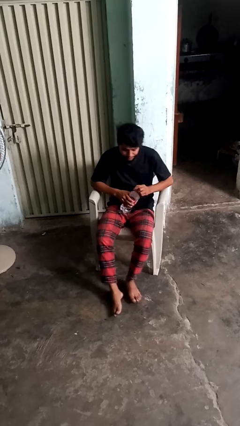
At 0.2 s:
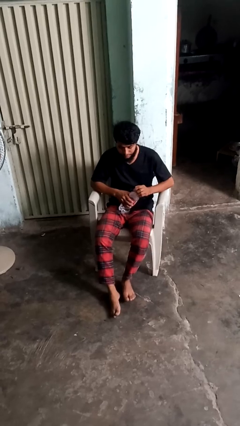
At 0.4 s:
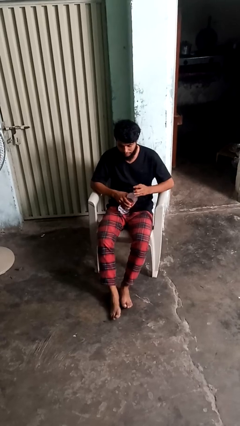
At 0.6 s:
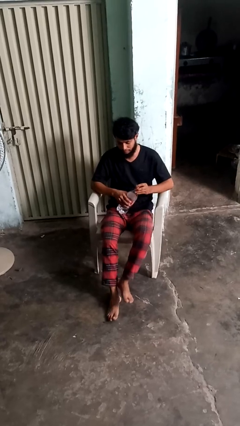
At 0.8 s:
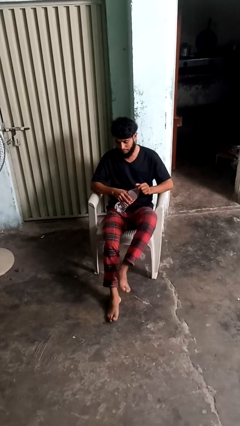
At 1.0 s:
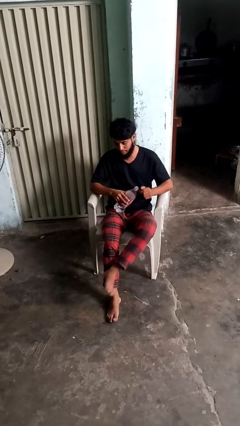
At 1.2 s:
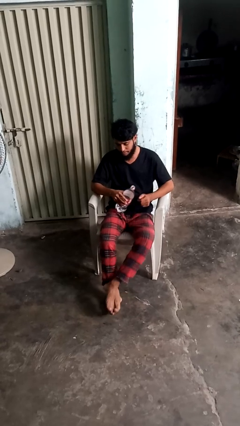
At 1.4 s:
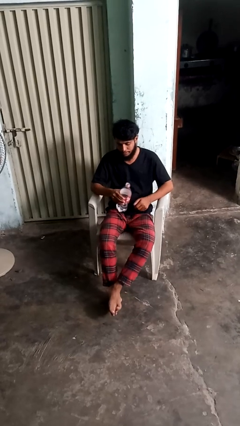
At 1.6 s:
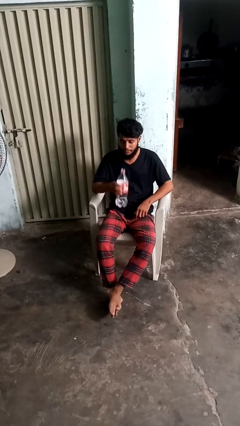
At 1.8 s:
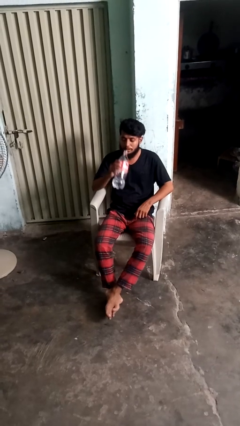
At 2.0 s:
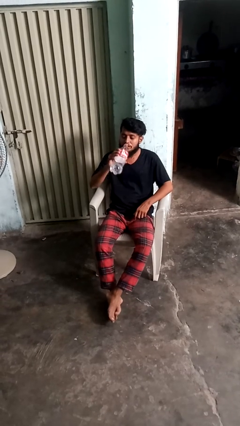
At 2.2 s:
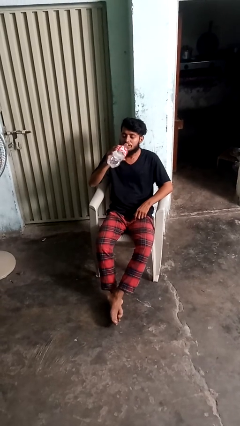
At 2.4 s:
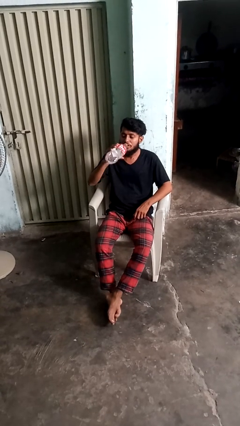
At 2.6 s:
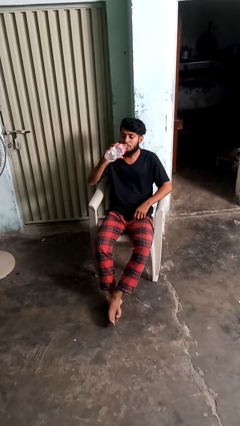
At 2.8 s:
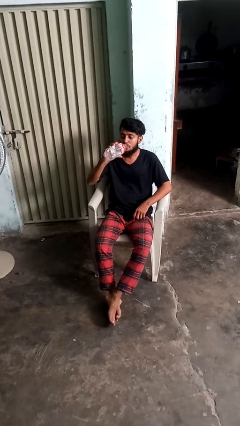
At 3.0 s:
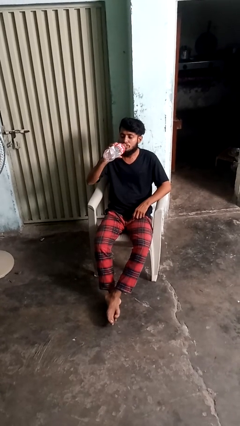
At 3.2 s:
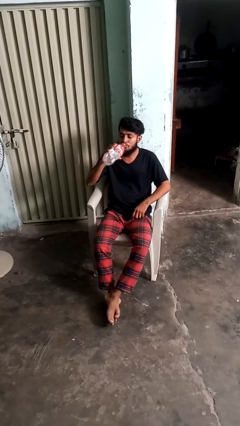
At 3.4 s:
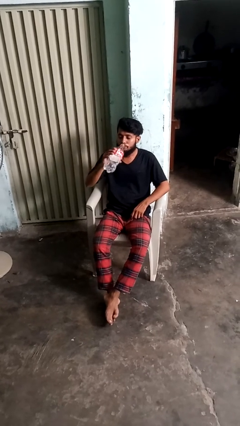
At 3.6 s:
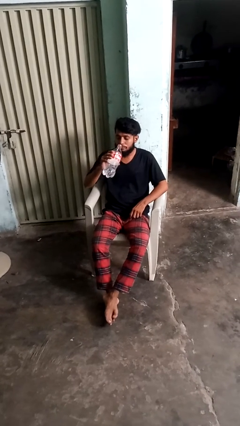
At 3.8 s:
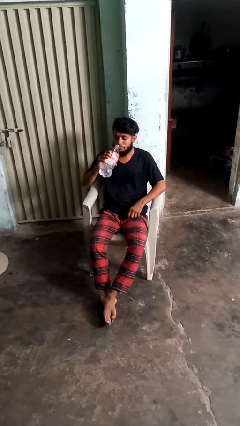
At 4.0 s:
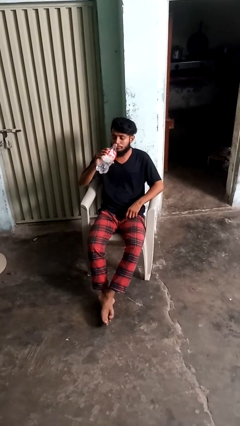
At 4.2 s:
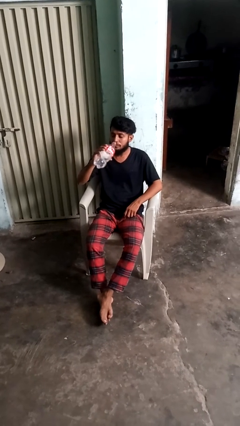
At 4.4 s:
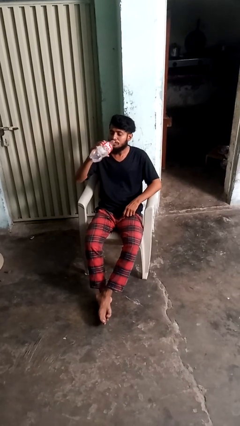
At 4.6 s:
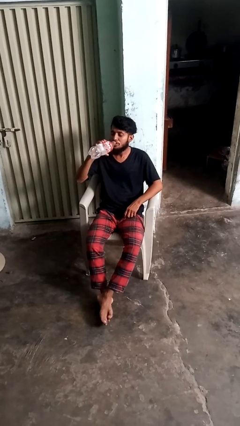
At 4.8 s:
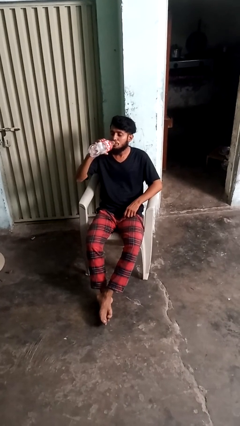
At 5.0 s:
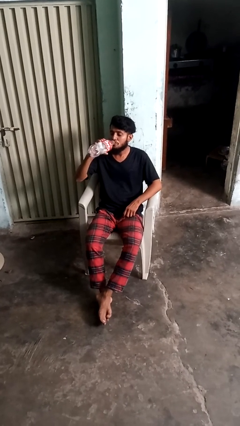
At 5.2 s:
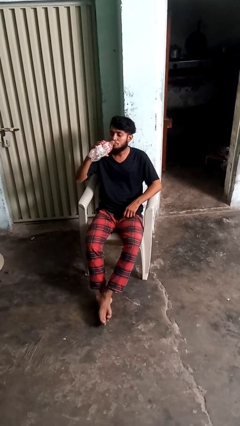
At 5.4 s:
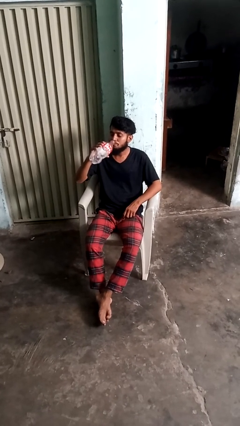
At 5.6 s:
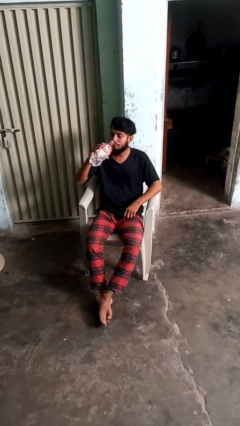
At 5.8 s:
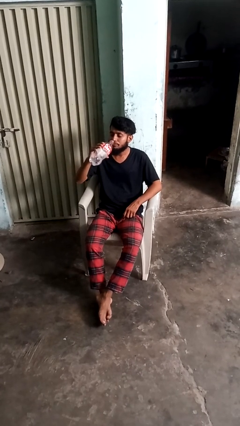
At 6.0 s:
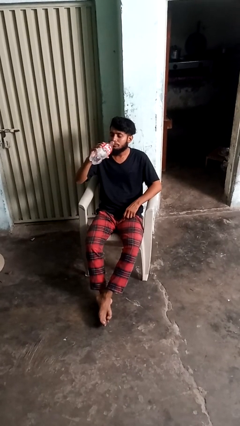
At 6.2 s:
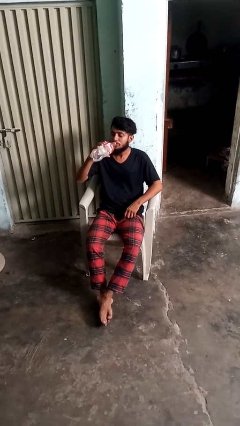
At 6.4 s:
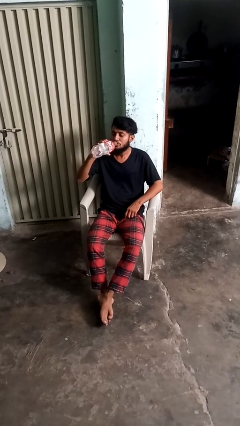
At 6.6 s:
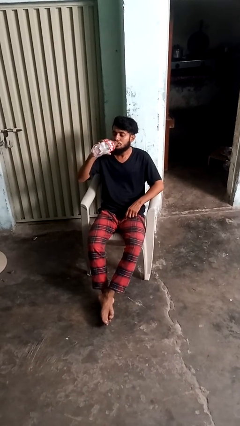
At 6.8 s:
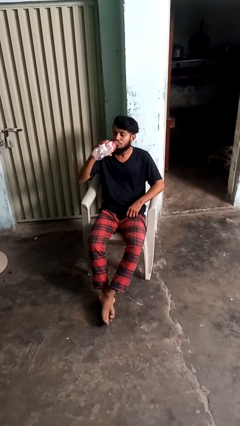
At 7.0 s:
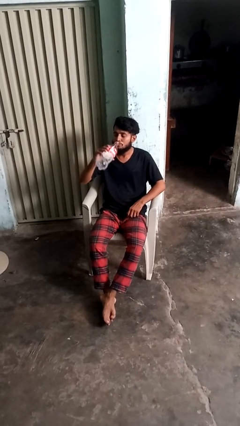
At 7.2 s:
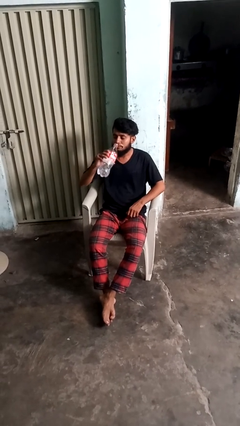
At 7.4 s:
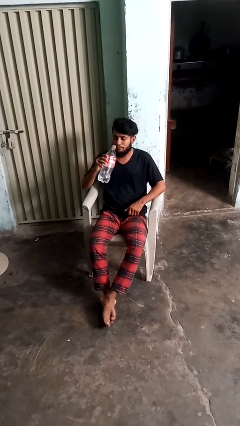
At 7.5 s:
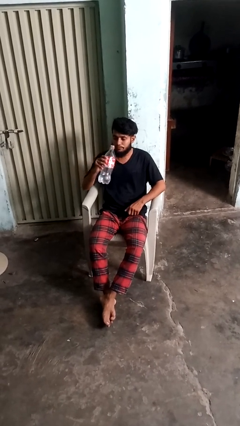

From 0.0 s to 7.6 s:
person drinks from bottle

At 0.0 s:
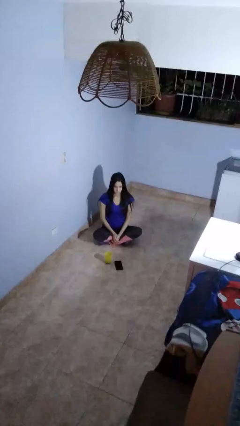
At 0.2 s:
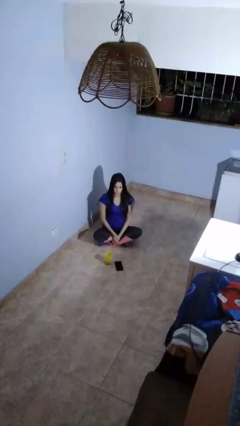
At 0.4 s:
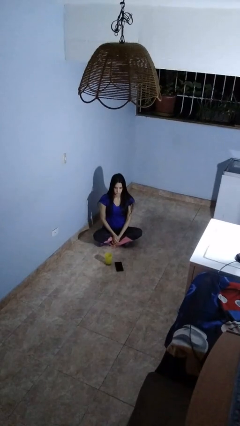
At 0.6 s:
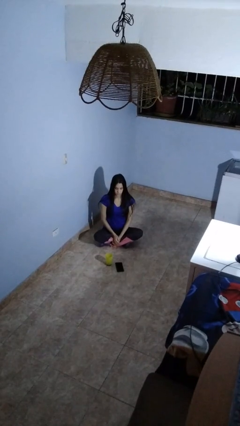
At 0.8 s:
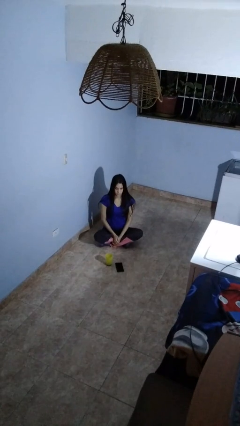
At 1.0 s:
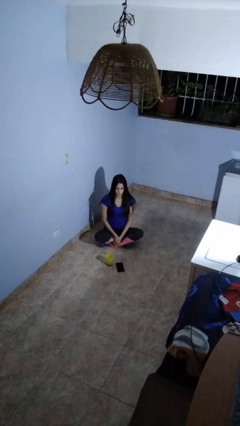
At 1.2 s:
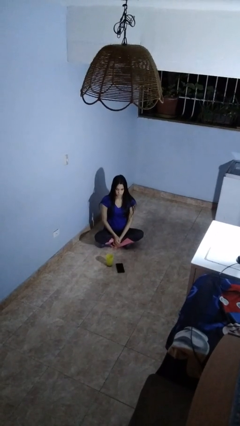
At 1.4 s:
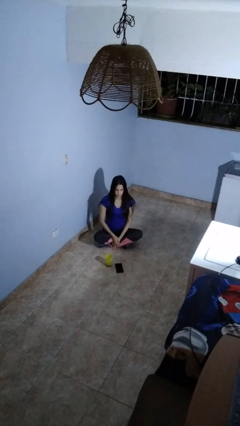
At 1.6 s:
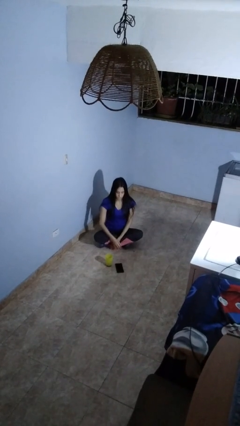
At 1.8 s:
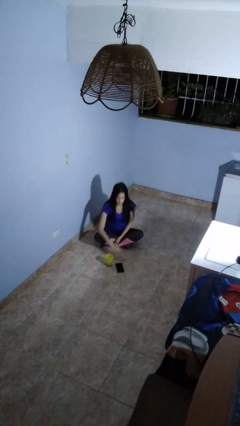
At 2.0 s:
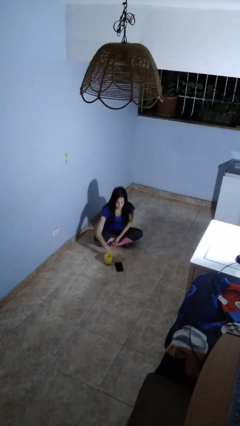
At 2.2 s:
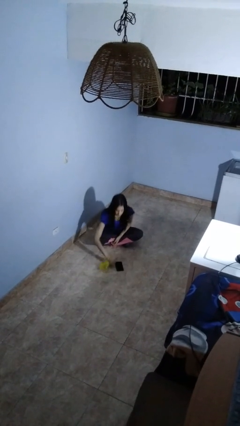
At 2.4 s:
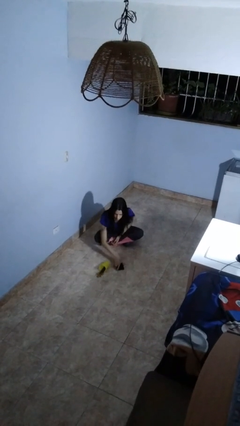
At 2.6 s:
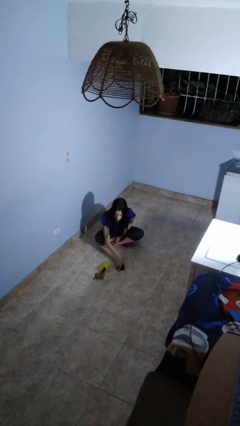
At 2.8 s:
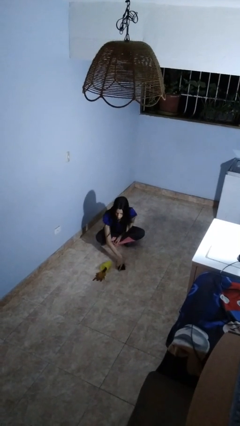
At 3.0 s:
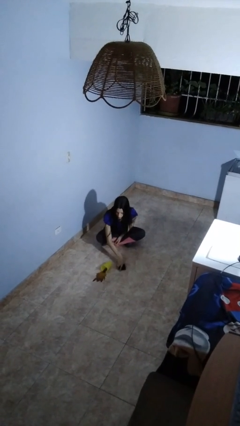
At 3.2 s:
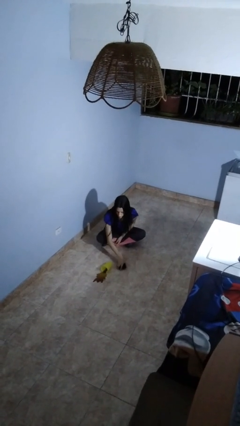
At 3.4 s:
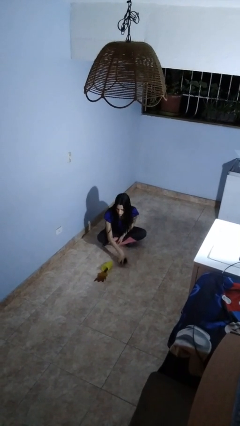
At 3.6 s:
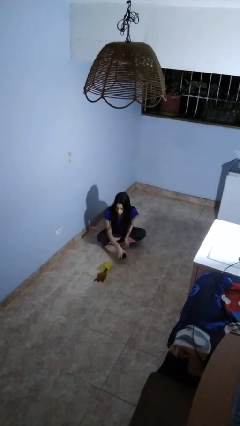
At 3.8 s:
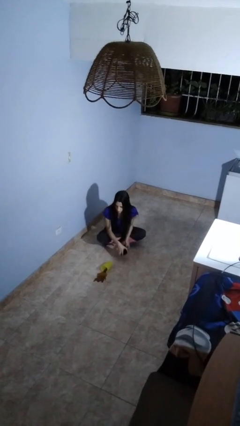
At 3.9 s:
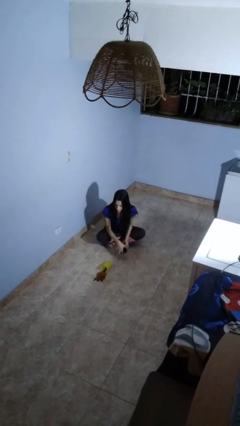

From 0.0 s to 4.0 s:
person spills on floor

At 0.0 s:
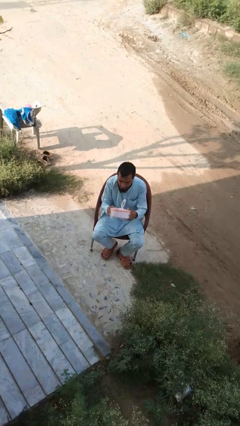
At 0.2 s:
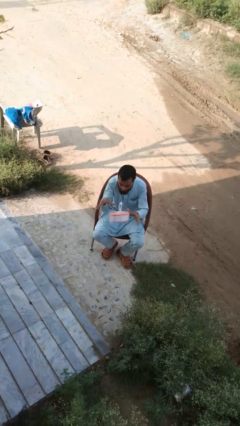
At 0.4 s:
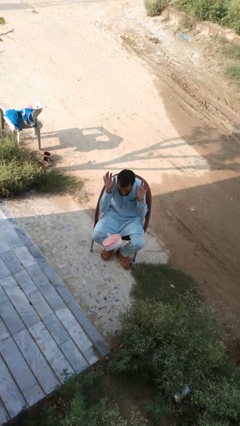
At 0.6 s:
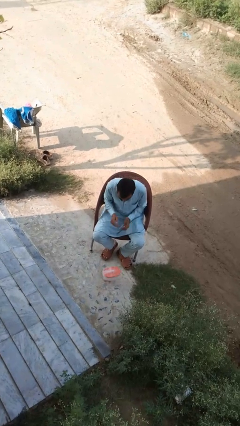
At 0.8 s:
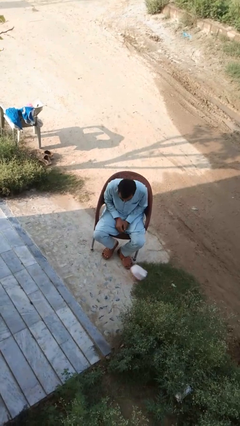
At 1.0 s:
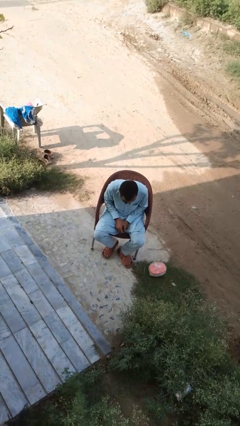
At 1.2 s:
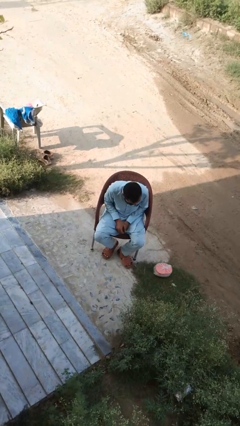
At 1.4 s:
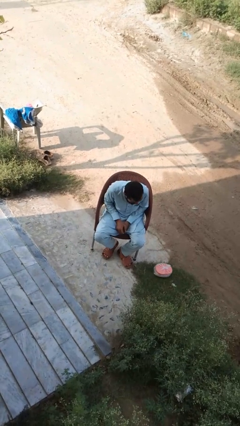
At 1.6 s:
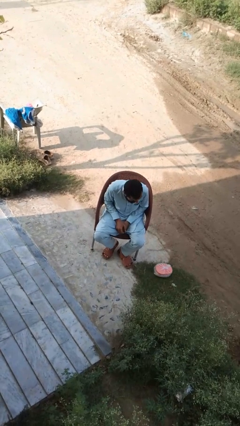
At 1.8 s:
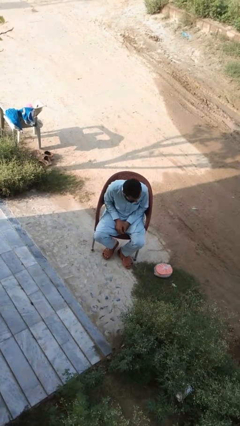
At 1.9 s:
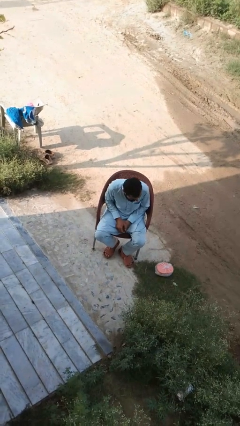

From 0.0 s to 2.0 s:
person drops object

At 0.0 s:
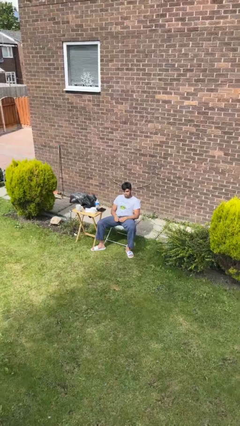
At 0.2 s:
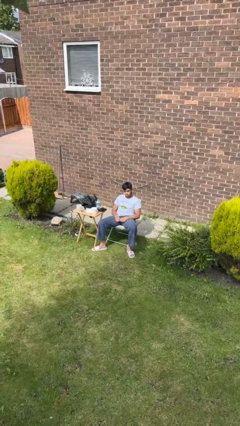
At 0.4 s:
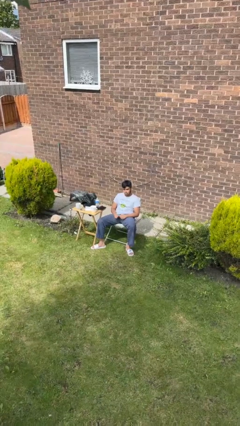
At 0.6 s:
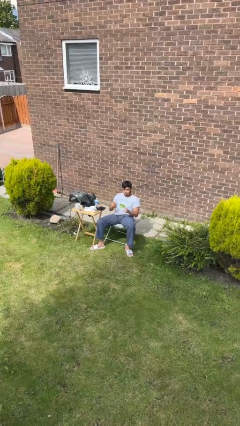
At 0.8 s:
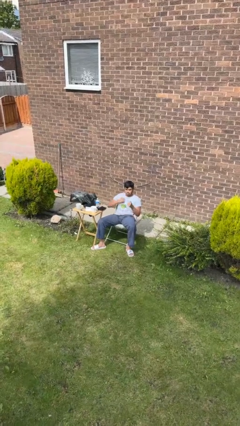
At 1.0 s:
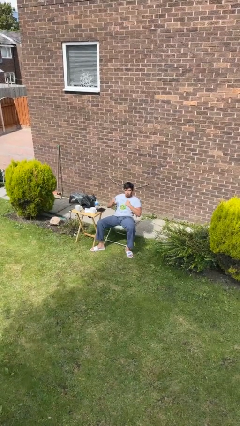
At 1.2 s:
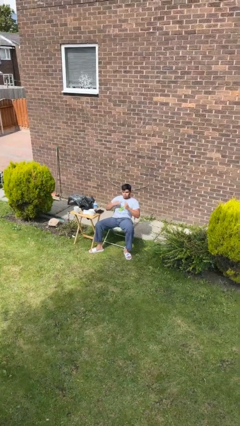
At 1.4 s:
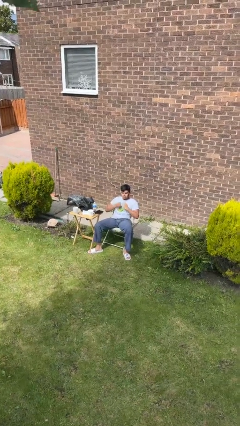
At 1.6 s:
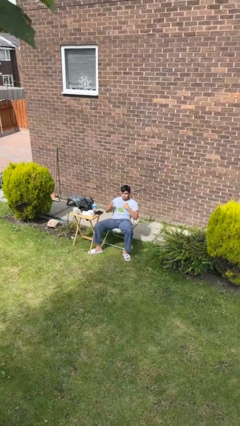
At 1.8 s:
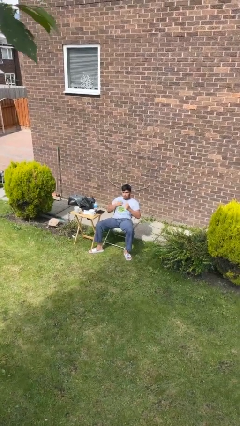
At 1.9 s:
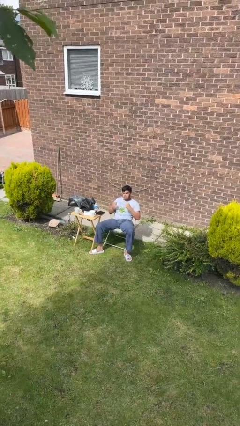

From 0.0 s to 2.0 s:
person drums on chest

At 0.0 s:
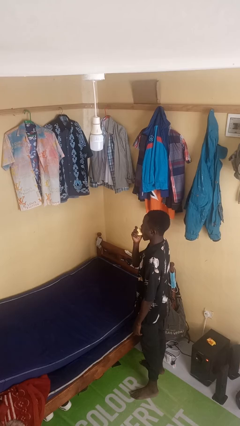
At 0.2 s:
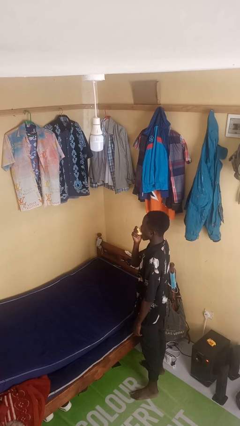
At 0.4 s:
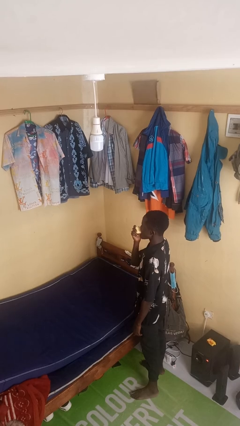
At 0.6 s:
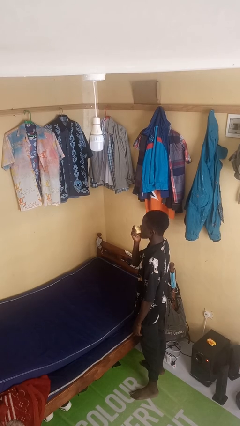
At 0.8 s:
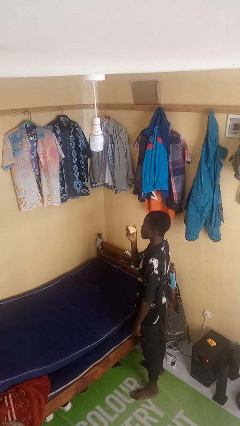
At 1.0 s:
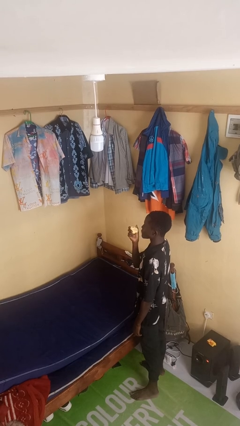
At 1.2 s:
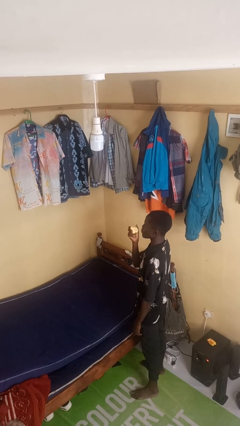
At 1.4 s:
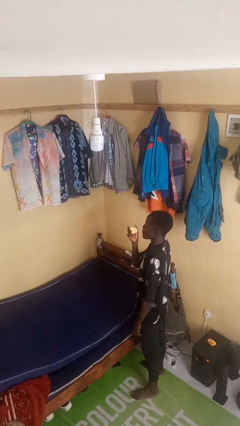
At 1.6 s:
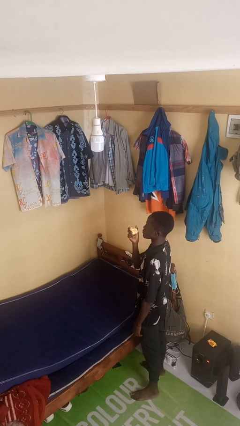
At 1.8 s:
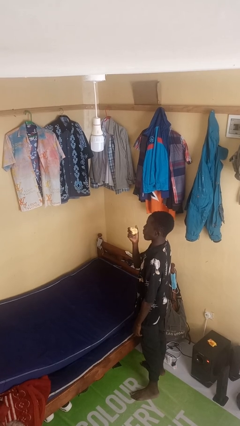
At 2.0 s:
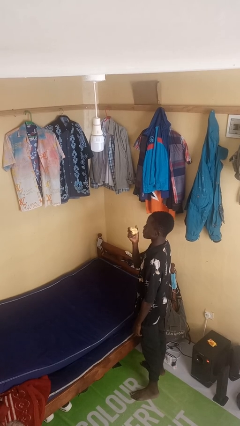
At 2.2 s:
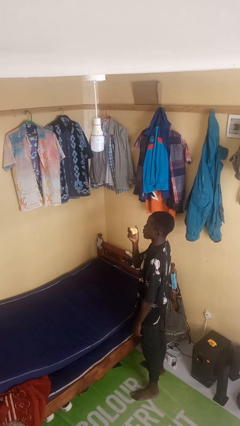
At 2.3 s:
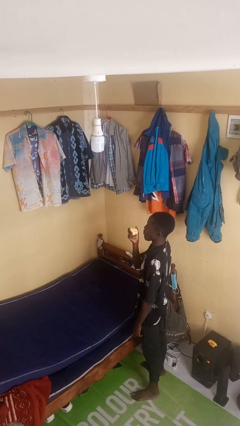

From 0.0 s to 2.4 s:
person eats apple
